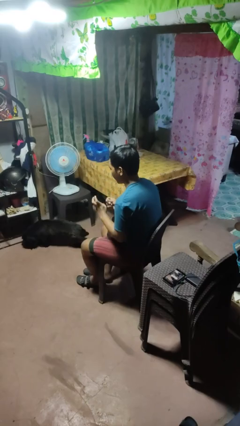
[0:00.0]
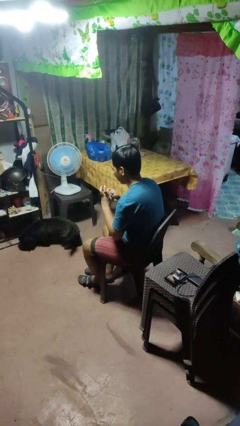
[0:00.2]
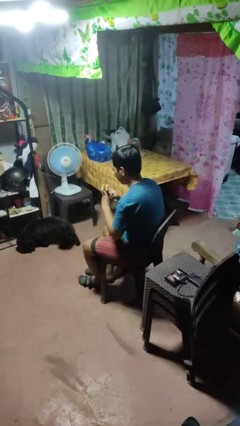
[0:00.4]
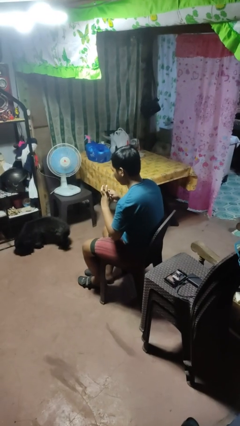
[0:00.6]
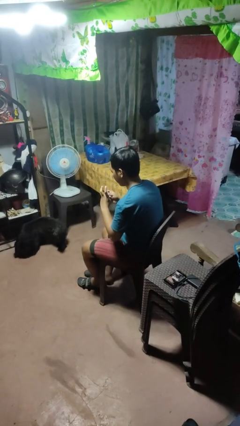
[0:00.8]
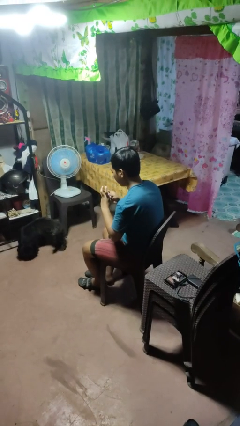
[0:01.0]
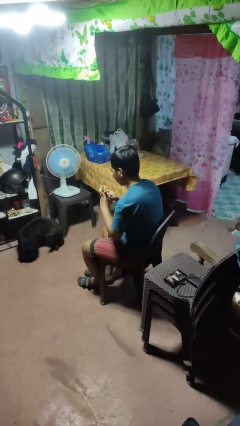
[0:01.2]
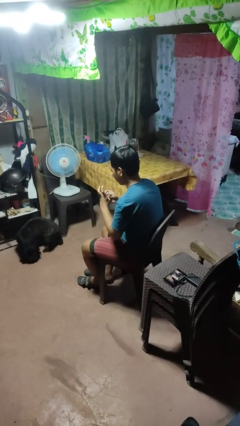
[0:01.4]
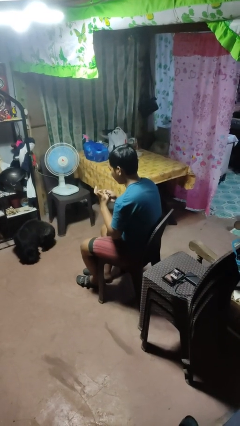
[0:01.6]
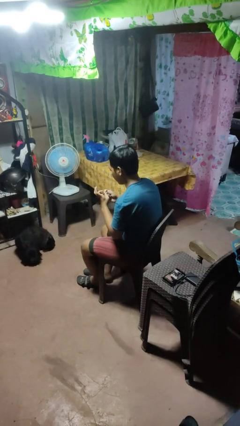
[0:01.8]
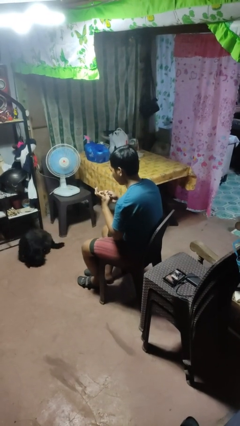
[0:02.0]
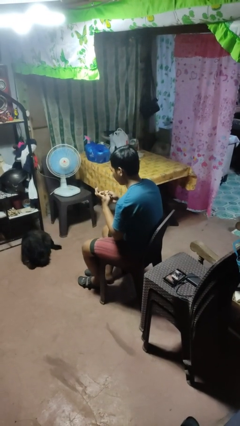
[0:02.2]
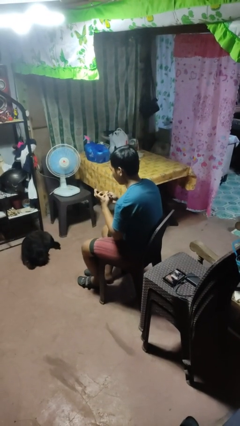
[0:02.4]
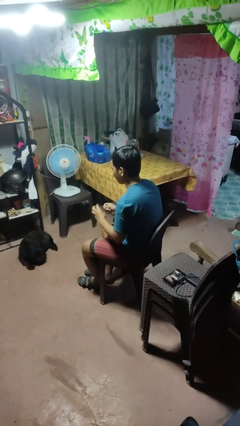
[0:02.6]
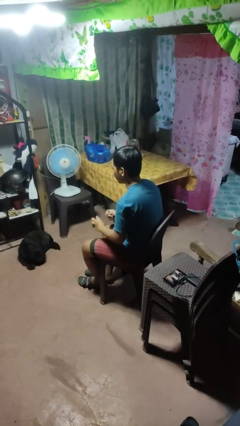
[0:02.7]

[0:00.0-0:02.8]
person files fingernails

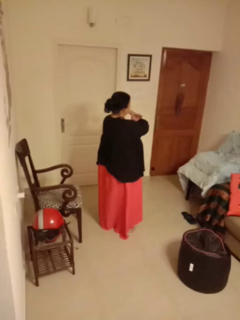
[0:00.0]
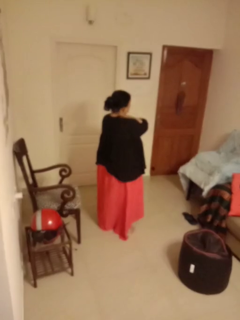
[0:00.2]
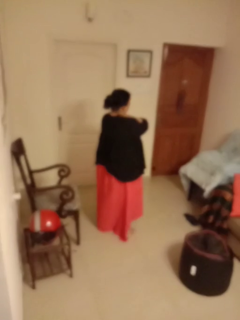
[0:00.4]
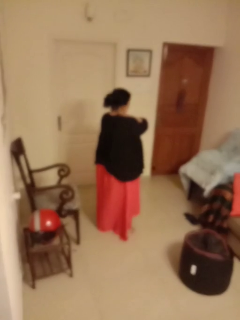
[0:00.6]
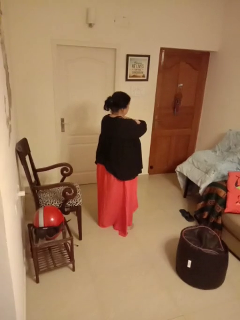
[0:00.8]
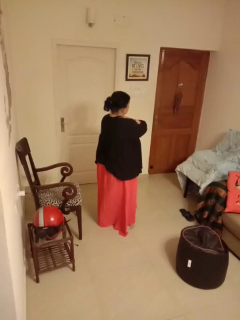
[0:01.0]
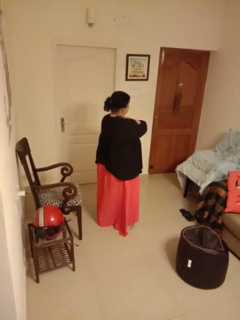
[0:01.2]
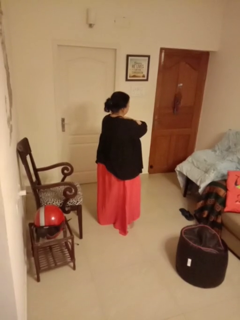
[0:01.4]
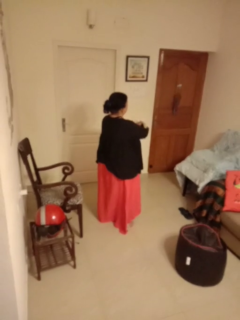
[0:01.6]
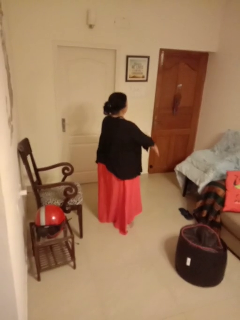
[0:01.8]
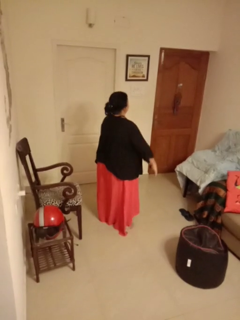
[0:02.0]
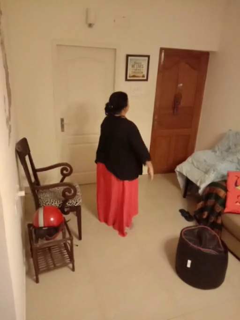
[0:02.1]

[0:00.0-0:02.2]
person gestures arms x

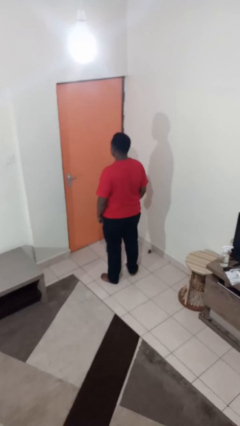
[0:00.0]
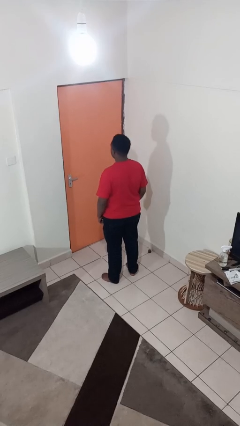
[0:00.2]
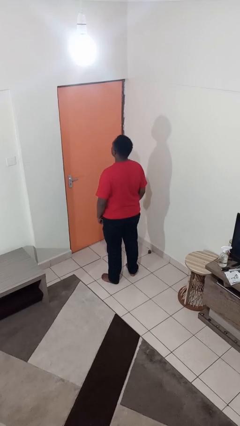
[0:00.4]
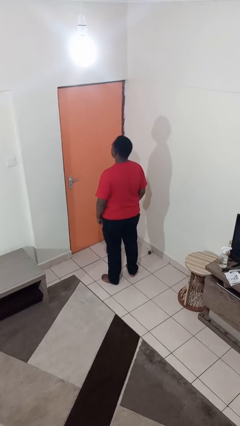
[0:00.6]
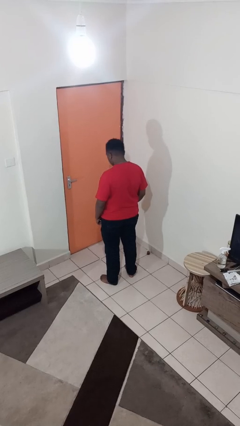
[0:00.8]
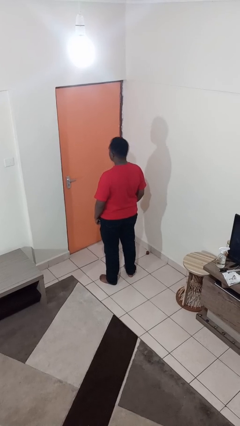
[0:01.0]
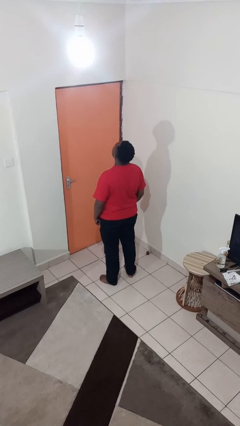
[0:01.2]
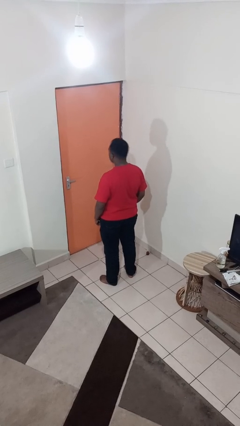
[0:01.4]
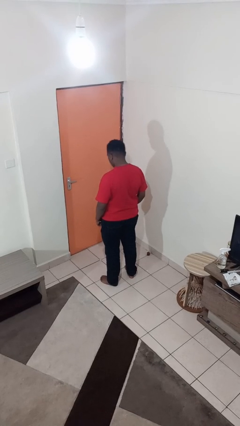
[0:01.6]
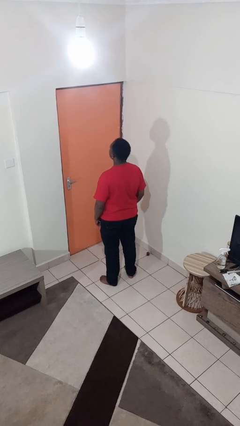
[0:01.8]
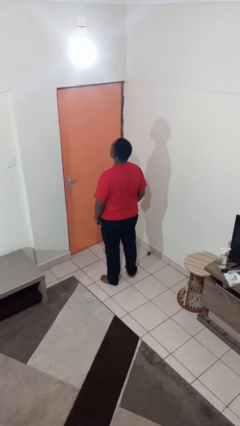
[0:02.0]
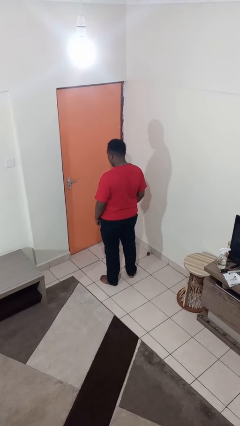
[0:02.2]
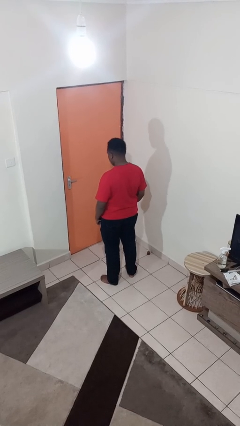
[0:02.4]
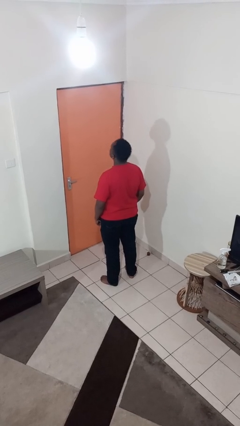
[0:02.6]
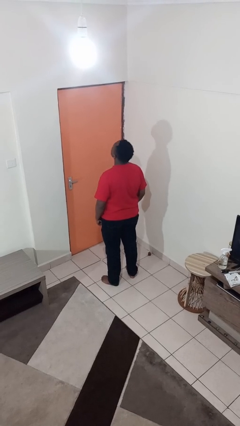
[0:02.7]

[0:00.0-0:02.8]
person nods head

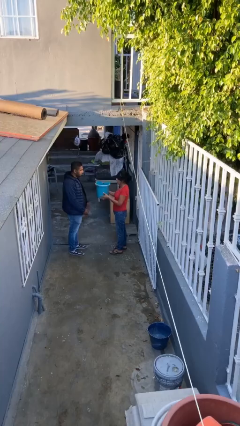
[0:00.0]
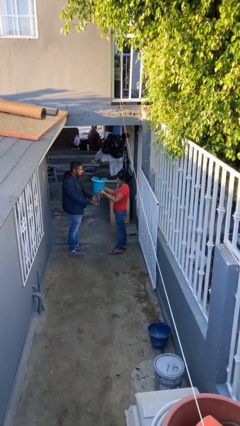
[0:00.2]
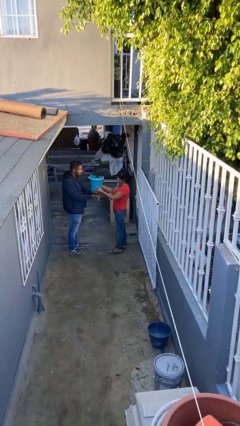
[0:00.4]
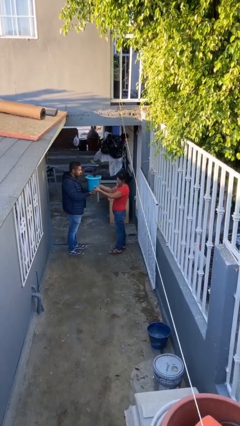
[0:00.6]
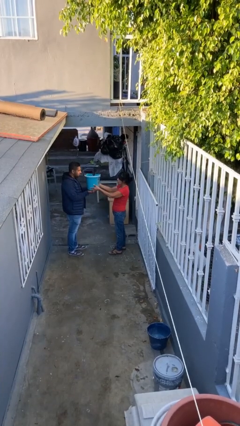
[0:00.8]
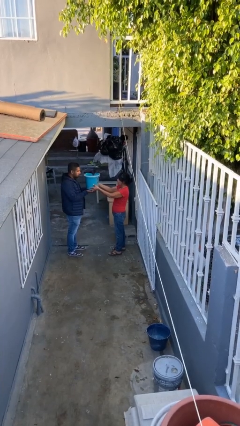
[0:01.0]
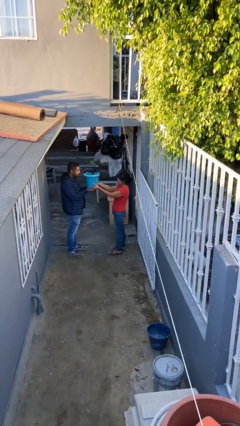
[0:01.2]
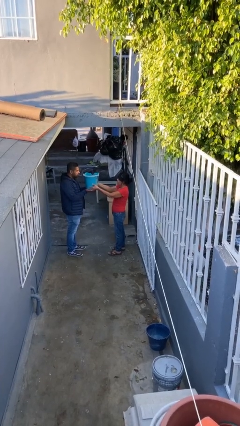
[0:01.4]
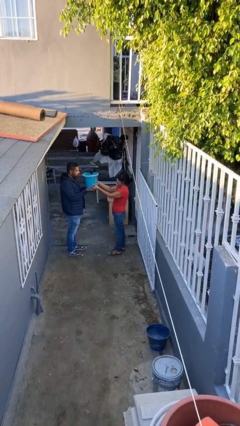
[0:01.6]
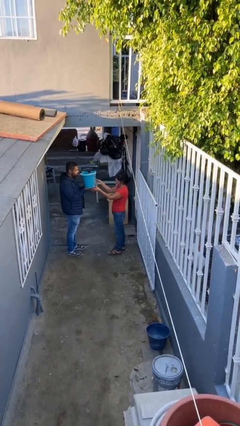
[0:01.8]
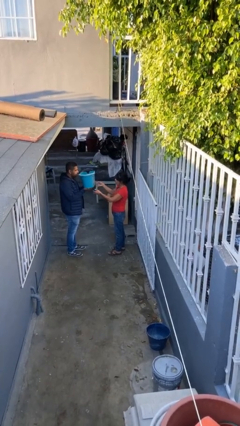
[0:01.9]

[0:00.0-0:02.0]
person transfers object to person

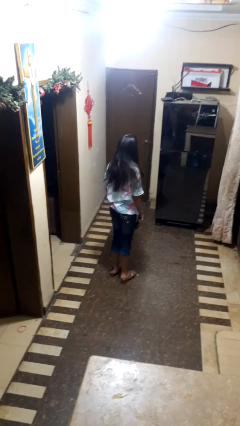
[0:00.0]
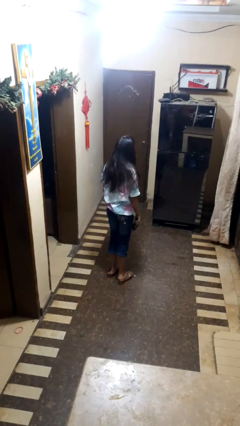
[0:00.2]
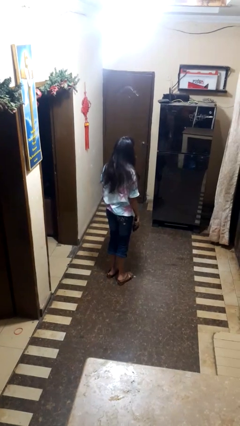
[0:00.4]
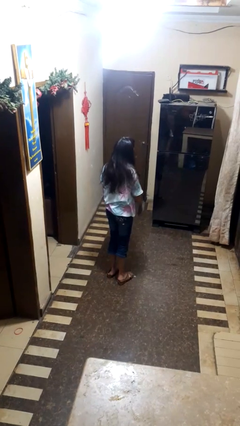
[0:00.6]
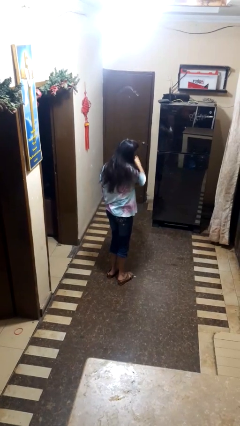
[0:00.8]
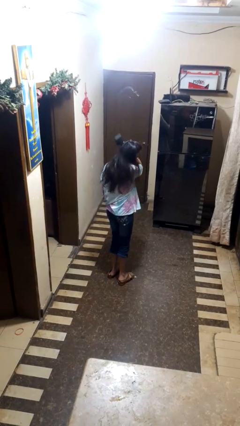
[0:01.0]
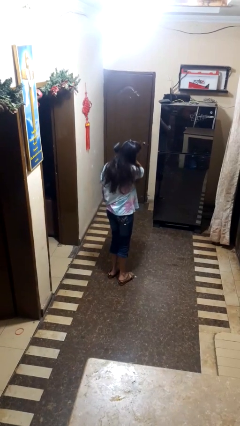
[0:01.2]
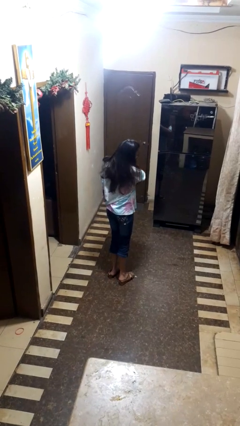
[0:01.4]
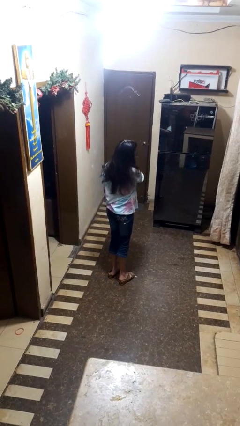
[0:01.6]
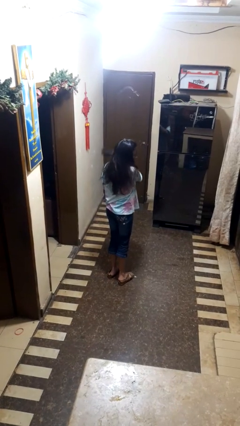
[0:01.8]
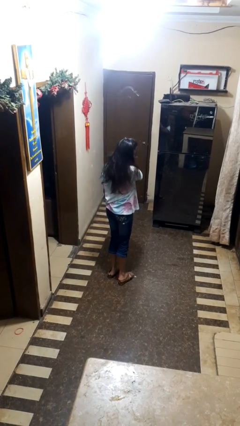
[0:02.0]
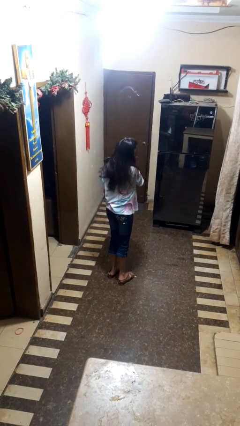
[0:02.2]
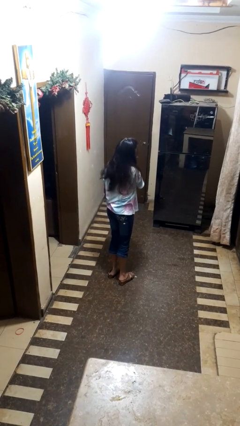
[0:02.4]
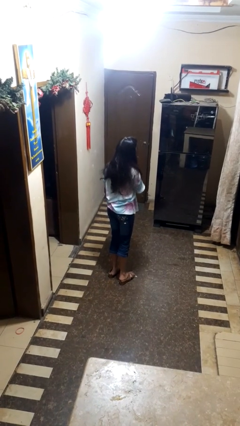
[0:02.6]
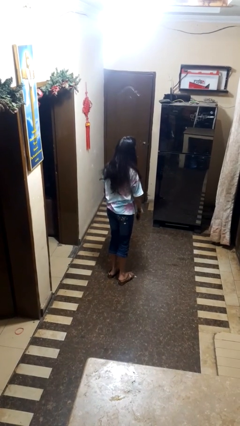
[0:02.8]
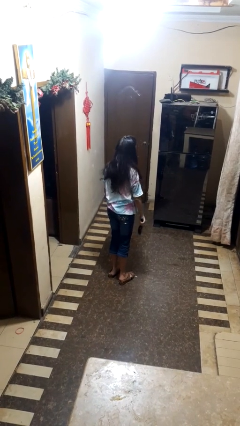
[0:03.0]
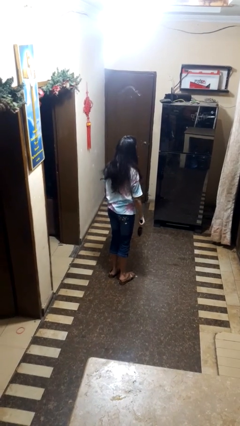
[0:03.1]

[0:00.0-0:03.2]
person brushes hair

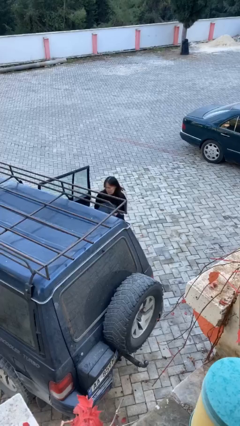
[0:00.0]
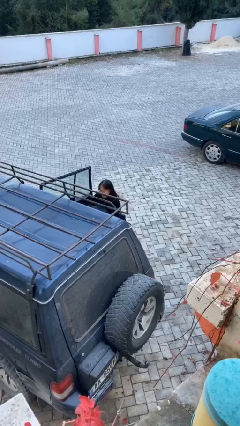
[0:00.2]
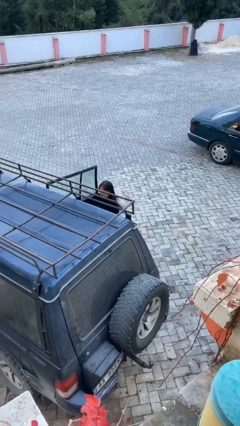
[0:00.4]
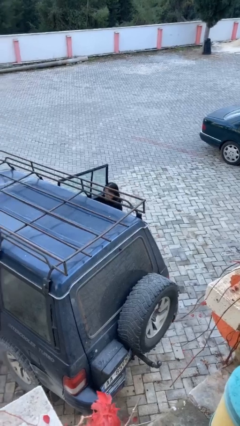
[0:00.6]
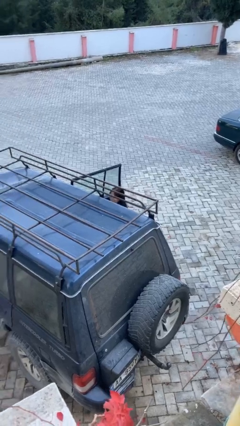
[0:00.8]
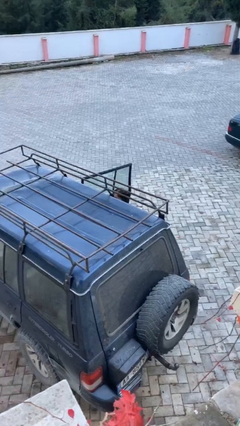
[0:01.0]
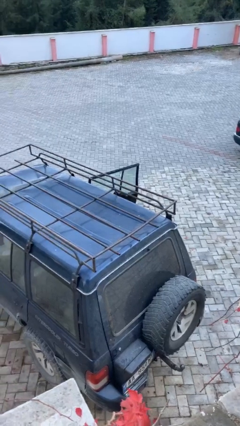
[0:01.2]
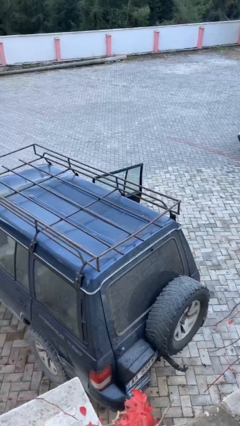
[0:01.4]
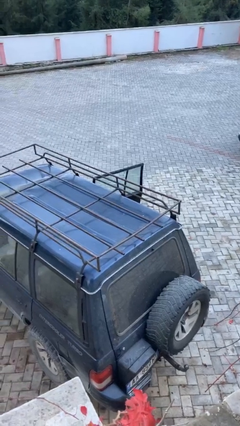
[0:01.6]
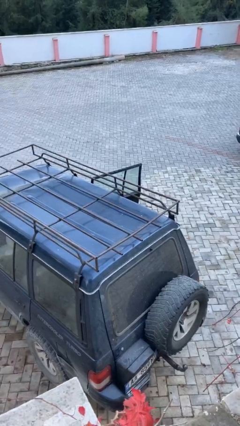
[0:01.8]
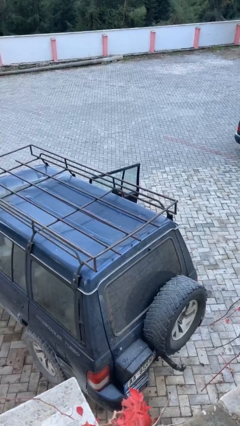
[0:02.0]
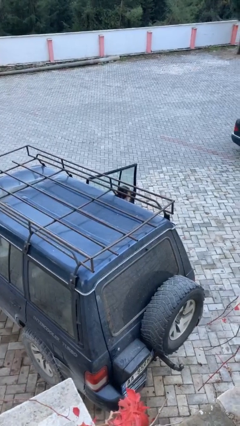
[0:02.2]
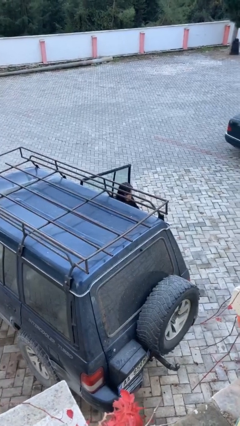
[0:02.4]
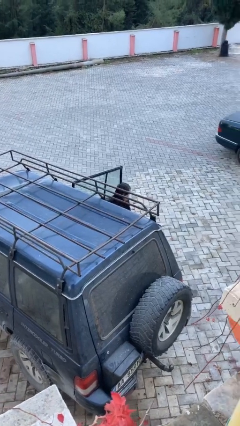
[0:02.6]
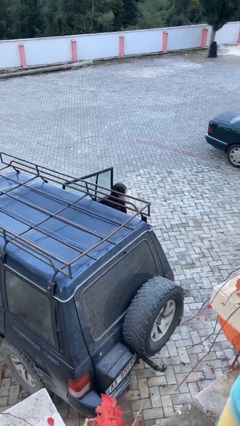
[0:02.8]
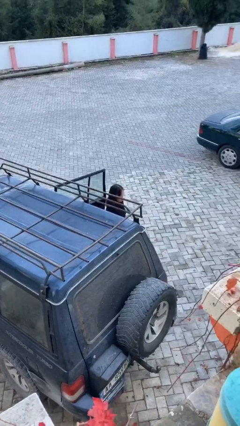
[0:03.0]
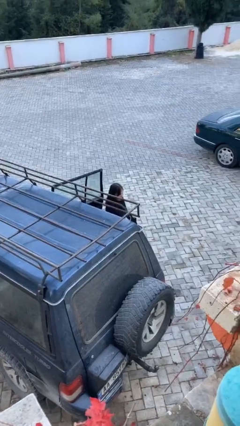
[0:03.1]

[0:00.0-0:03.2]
person loads car

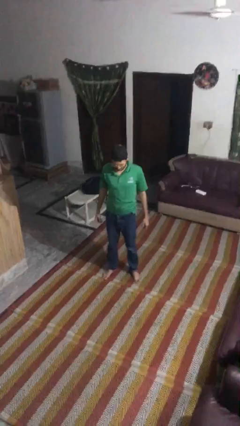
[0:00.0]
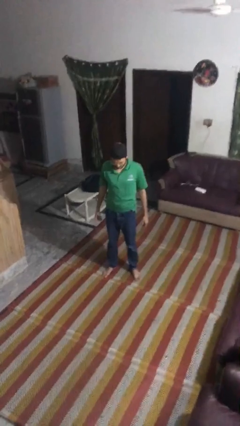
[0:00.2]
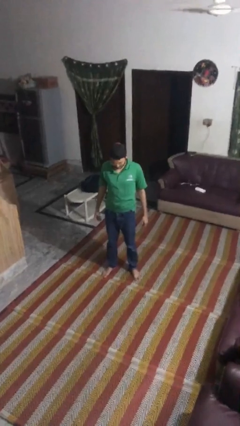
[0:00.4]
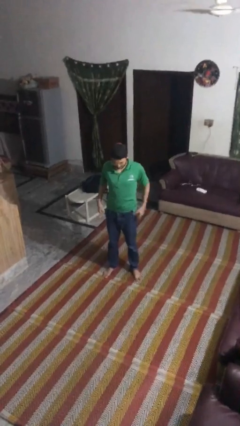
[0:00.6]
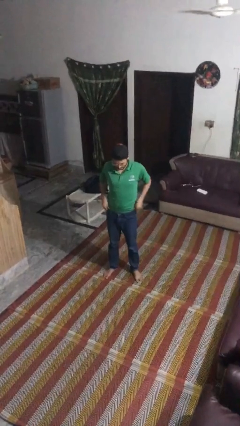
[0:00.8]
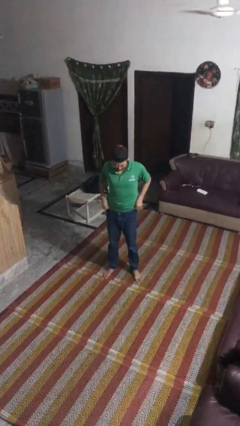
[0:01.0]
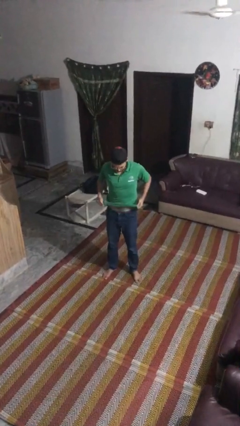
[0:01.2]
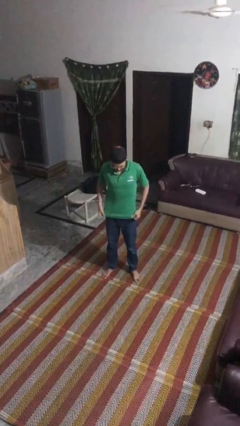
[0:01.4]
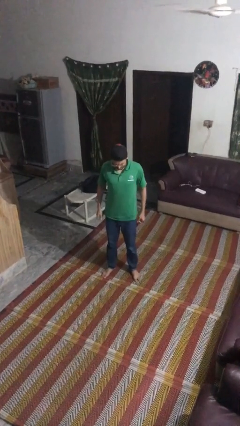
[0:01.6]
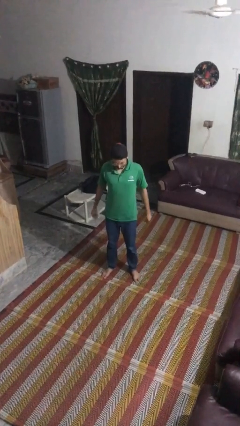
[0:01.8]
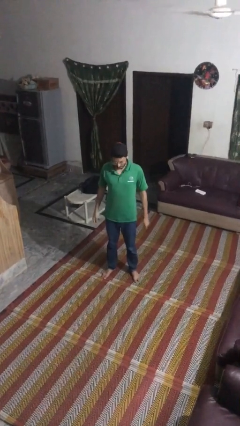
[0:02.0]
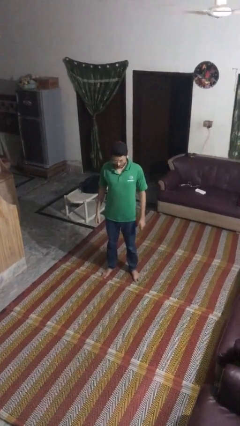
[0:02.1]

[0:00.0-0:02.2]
person untucks shirt
